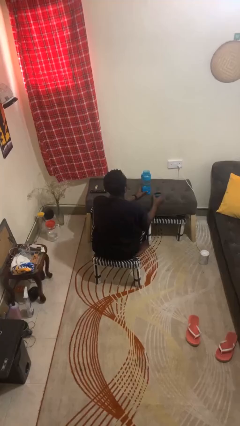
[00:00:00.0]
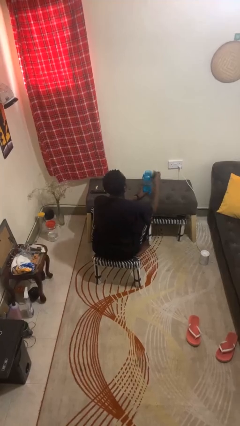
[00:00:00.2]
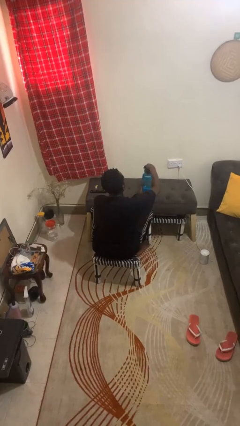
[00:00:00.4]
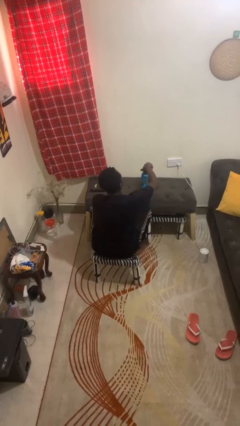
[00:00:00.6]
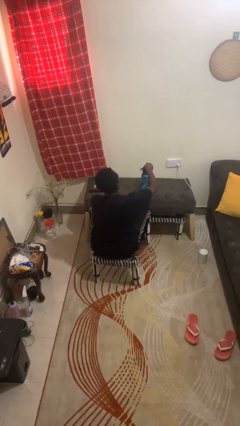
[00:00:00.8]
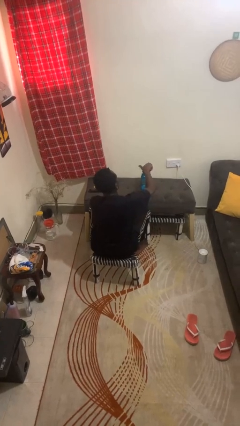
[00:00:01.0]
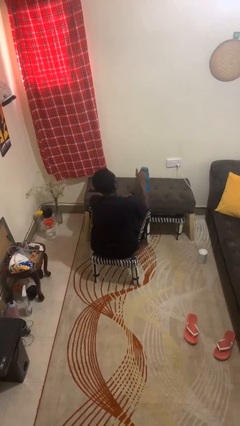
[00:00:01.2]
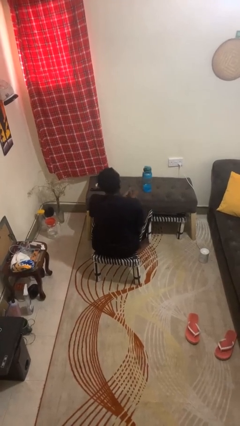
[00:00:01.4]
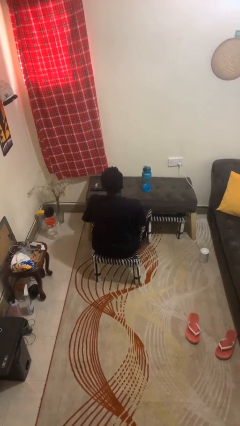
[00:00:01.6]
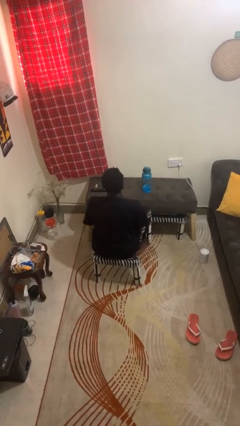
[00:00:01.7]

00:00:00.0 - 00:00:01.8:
person closes jar

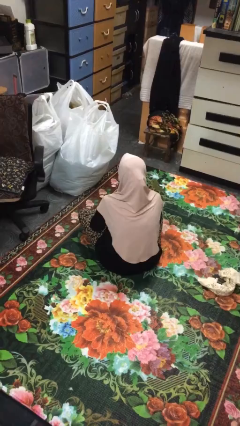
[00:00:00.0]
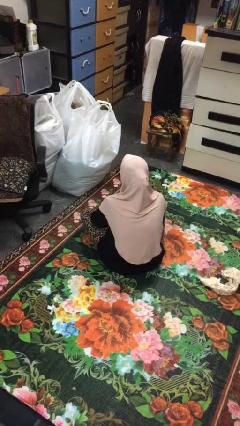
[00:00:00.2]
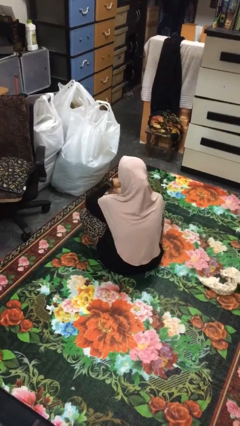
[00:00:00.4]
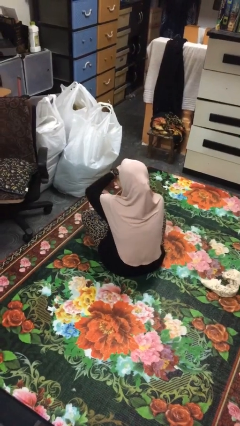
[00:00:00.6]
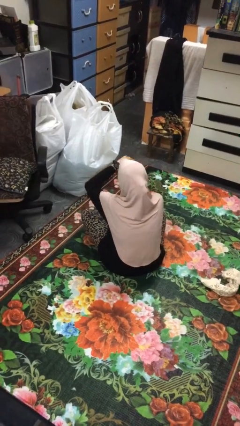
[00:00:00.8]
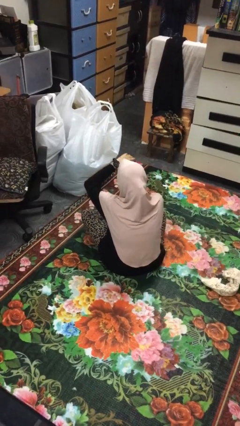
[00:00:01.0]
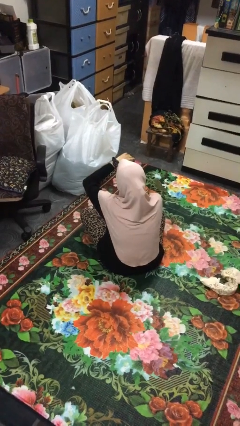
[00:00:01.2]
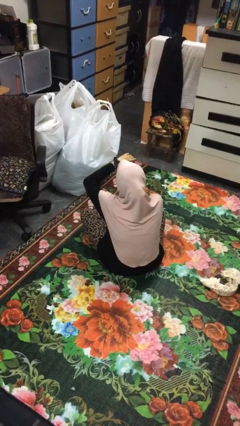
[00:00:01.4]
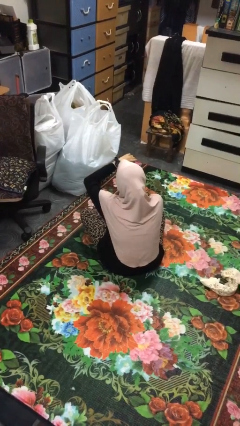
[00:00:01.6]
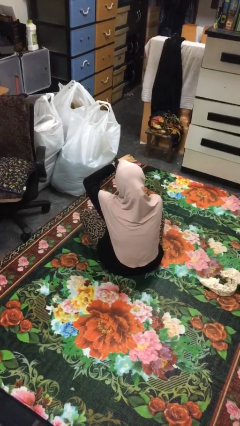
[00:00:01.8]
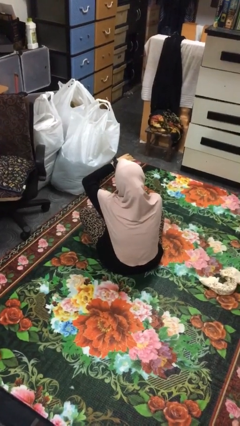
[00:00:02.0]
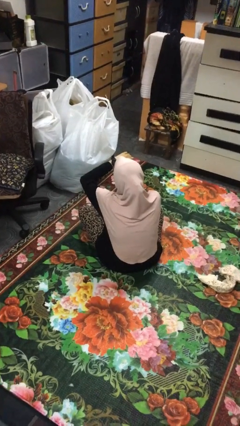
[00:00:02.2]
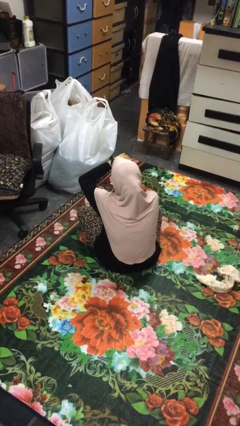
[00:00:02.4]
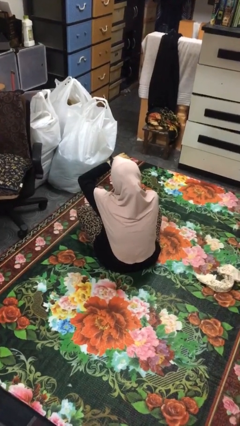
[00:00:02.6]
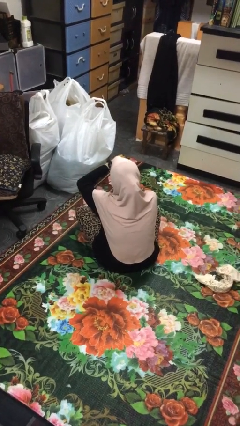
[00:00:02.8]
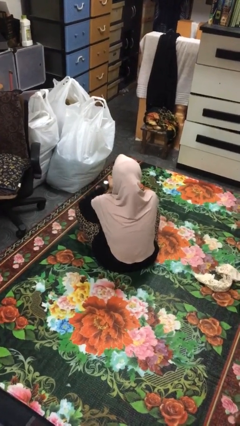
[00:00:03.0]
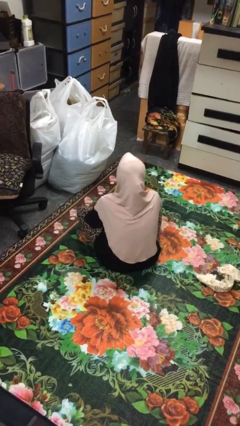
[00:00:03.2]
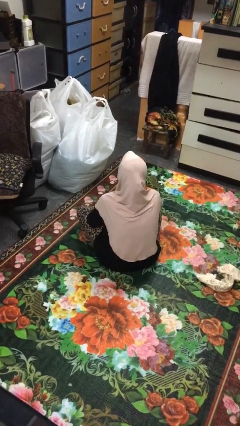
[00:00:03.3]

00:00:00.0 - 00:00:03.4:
person looks at wristwatch

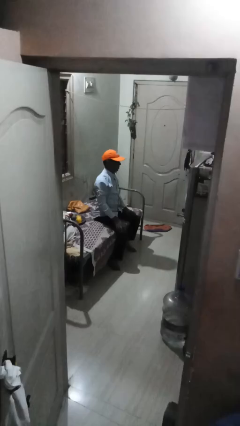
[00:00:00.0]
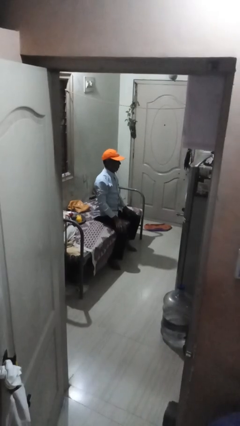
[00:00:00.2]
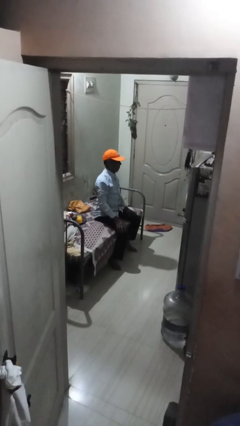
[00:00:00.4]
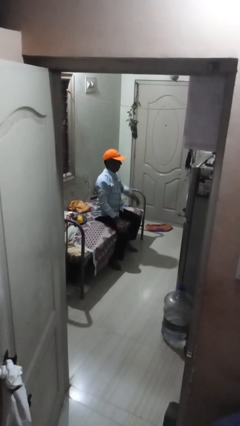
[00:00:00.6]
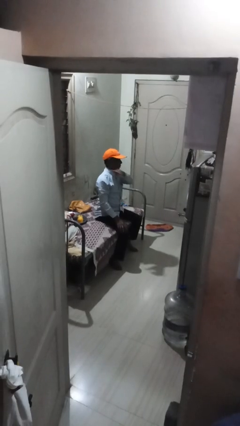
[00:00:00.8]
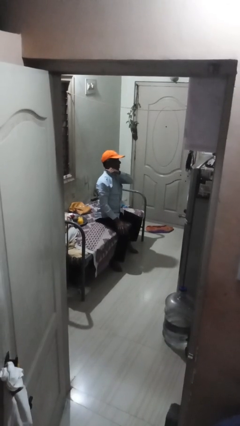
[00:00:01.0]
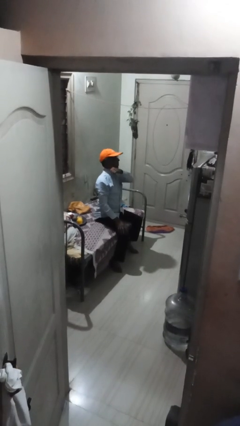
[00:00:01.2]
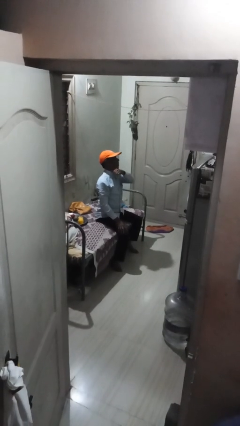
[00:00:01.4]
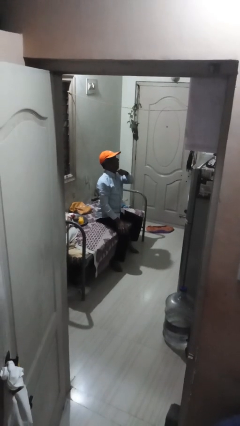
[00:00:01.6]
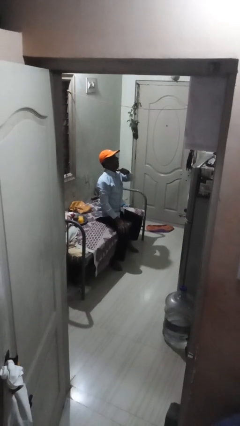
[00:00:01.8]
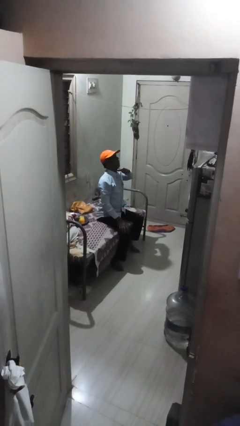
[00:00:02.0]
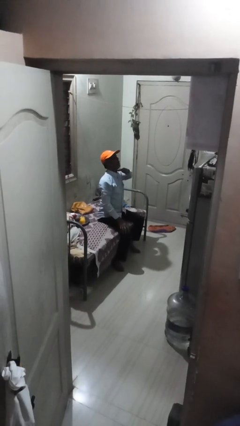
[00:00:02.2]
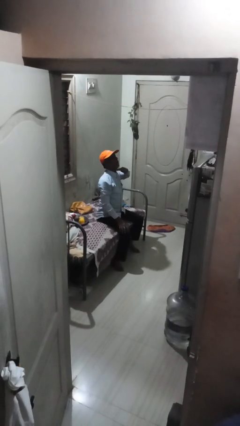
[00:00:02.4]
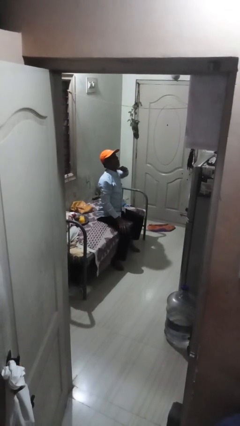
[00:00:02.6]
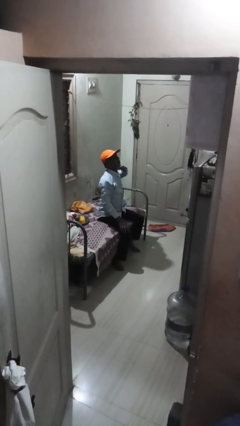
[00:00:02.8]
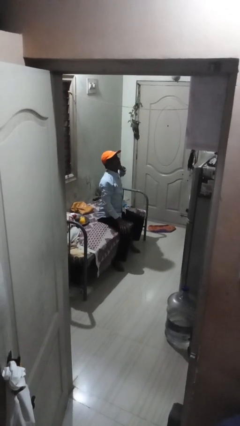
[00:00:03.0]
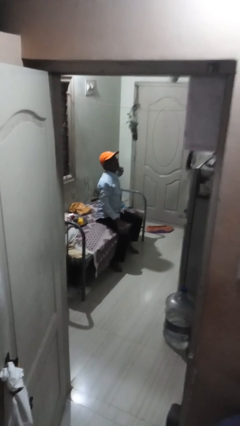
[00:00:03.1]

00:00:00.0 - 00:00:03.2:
person gestures cut

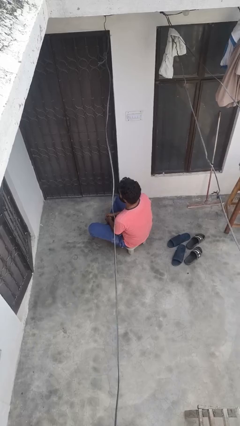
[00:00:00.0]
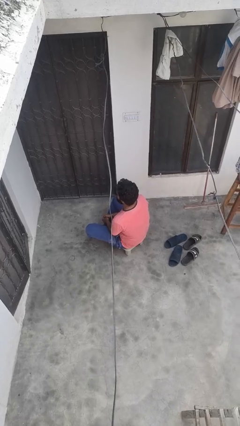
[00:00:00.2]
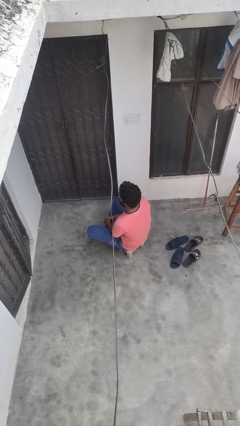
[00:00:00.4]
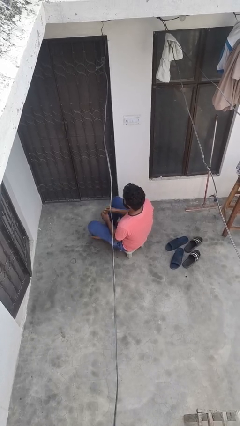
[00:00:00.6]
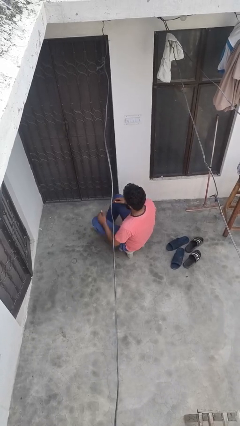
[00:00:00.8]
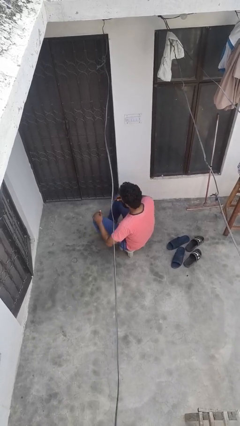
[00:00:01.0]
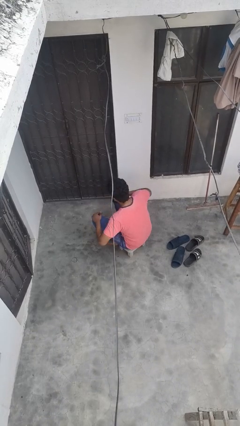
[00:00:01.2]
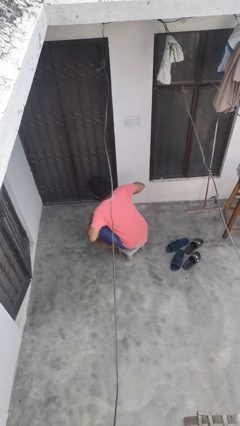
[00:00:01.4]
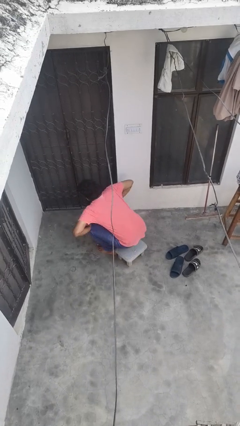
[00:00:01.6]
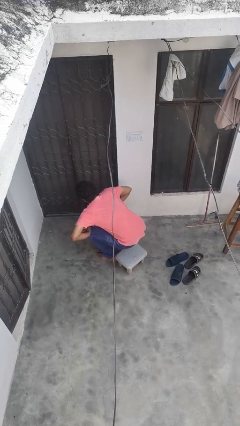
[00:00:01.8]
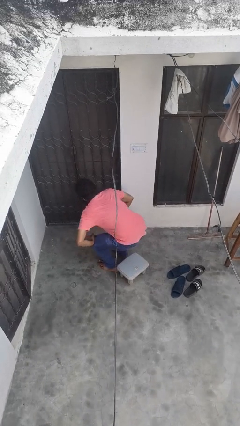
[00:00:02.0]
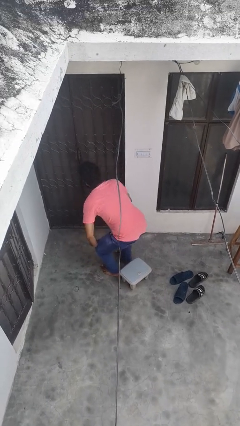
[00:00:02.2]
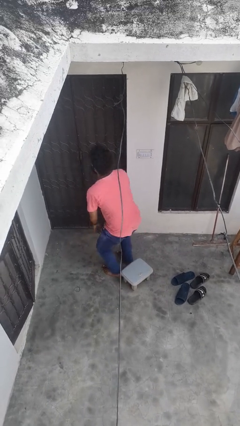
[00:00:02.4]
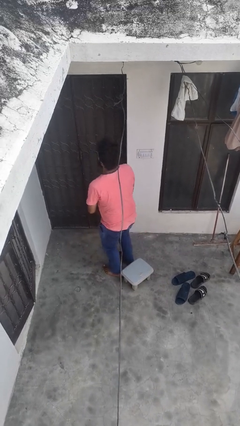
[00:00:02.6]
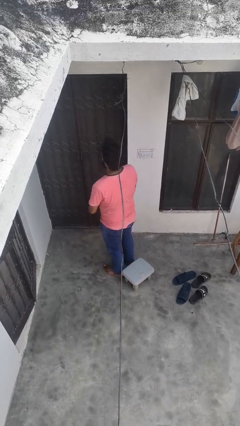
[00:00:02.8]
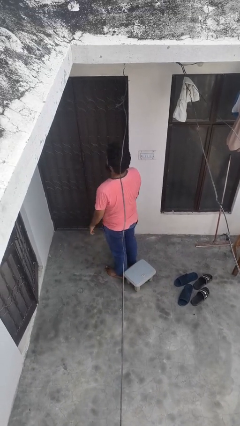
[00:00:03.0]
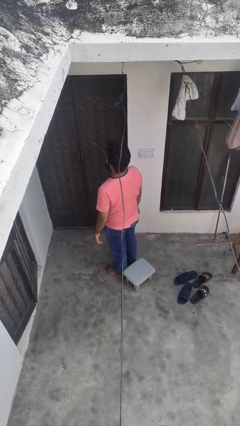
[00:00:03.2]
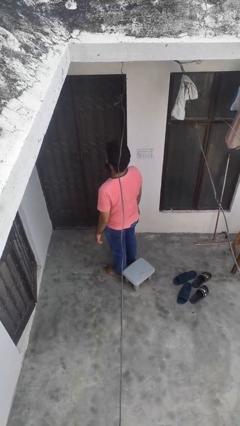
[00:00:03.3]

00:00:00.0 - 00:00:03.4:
person stands up from floor

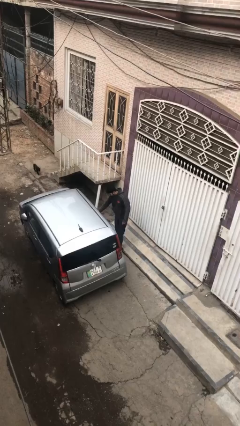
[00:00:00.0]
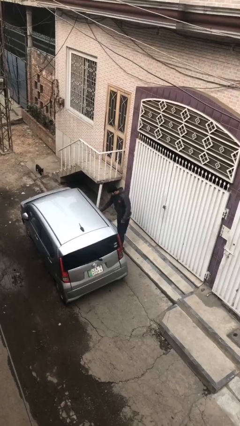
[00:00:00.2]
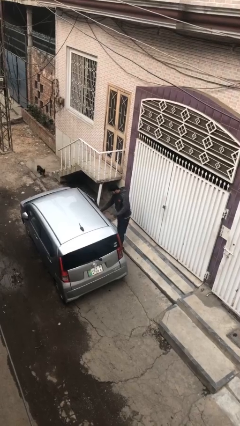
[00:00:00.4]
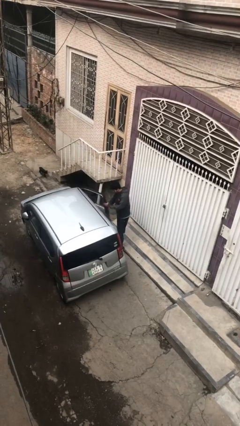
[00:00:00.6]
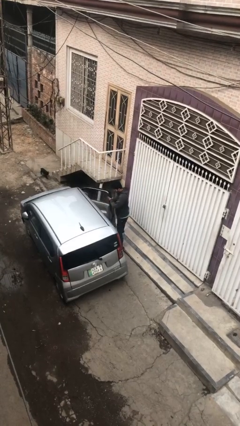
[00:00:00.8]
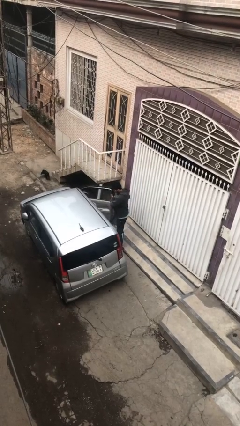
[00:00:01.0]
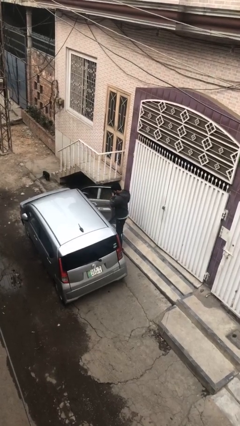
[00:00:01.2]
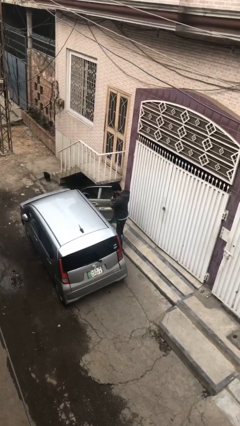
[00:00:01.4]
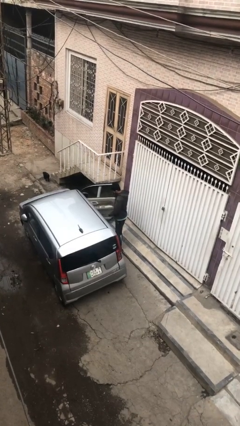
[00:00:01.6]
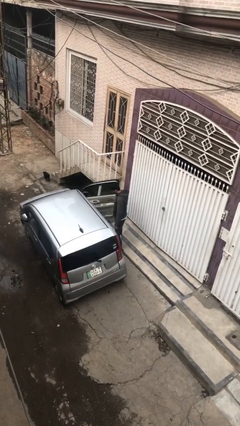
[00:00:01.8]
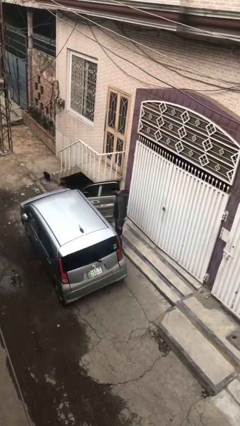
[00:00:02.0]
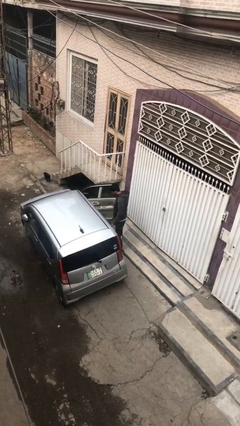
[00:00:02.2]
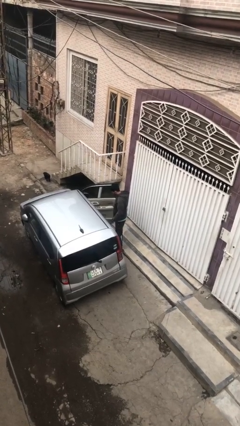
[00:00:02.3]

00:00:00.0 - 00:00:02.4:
person opens car door

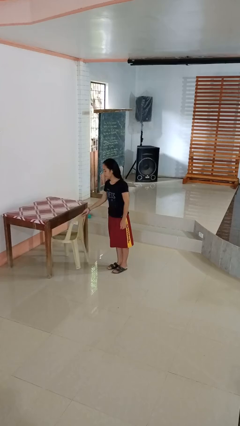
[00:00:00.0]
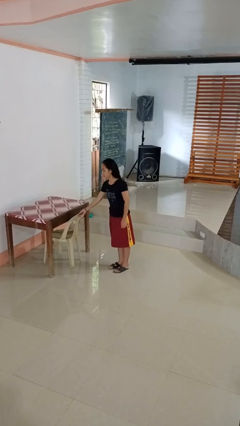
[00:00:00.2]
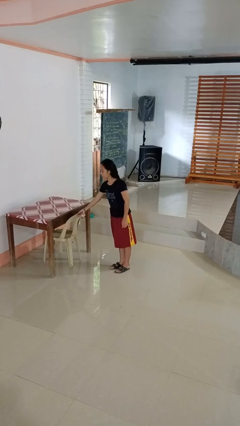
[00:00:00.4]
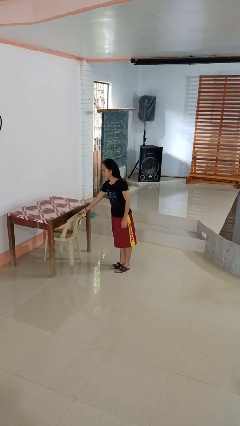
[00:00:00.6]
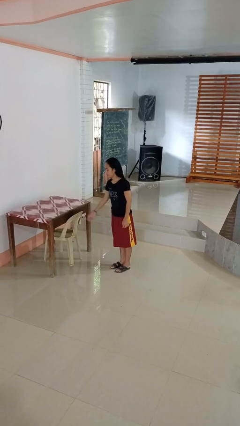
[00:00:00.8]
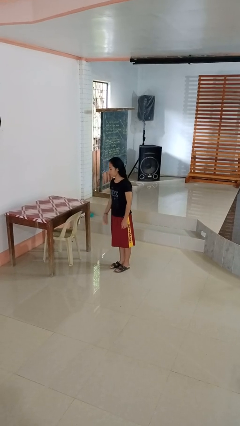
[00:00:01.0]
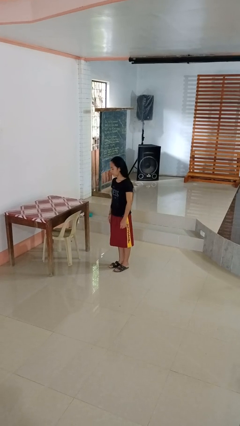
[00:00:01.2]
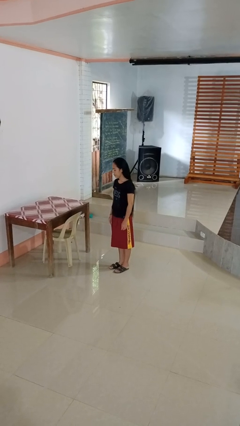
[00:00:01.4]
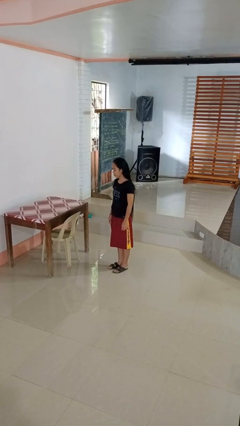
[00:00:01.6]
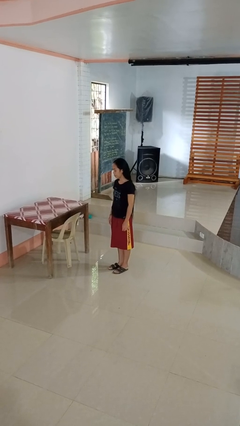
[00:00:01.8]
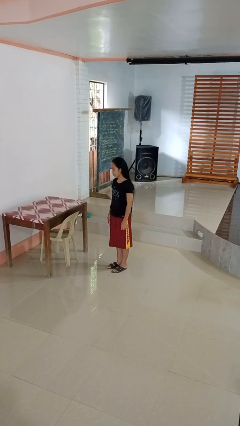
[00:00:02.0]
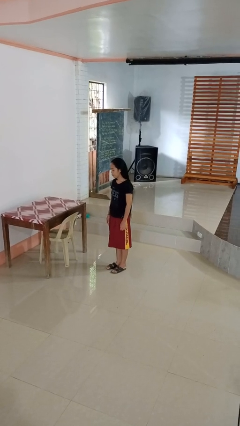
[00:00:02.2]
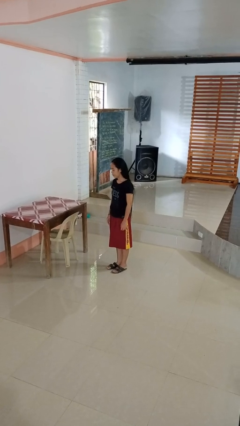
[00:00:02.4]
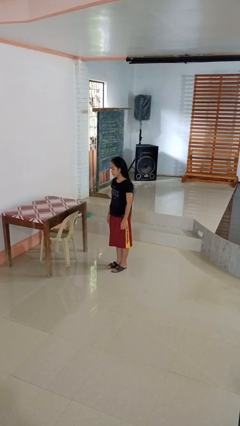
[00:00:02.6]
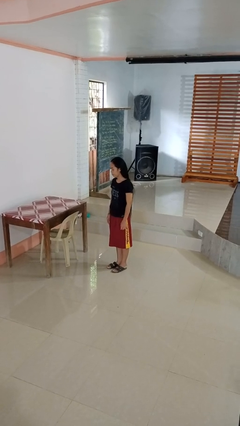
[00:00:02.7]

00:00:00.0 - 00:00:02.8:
person pushes in chair

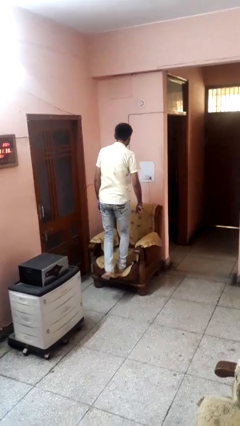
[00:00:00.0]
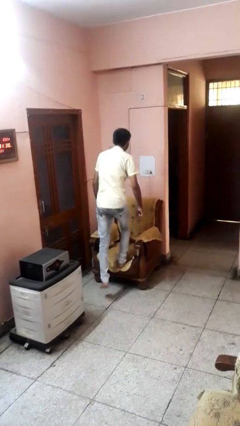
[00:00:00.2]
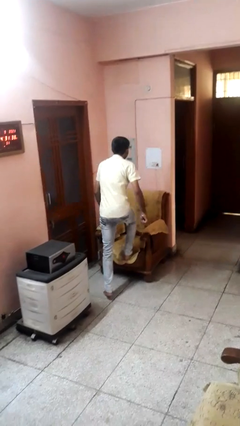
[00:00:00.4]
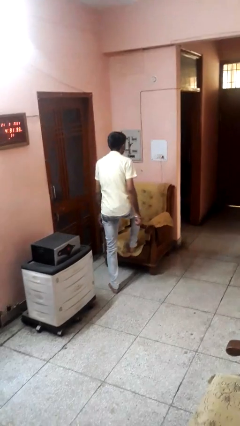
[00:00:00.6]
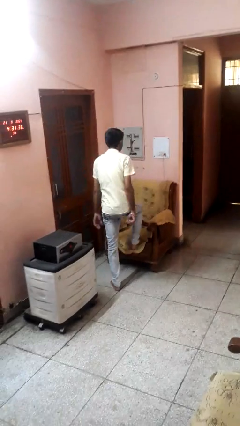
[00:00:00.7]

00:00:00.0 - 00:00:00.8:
person climbs off couch
